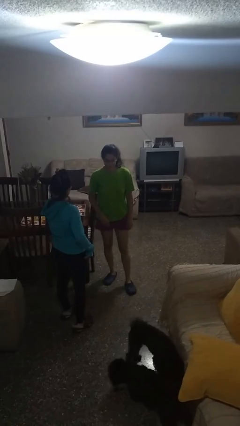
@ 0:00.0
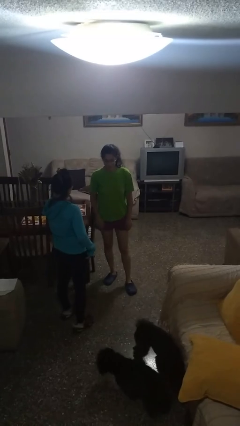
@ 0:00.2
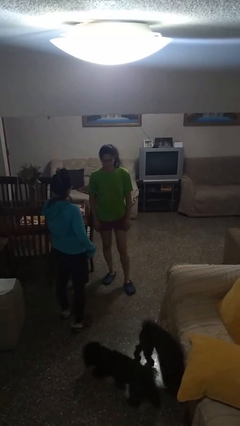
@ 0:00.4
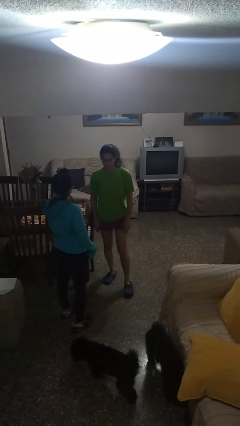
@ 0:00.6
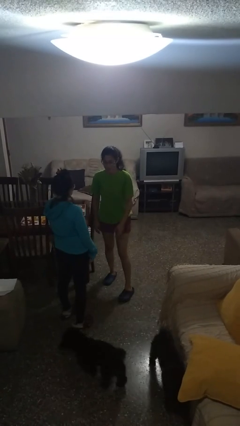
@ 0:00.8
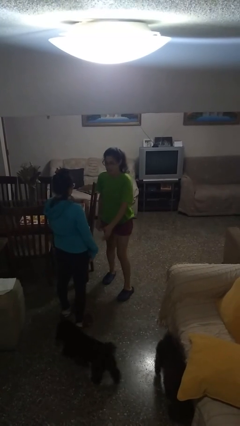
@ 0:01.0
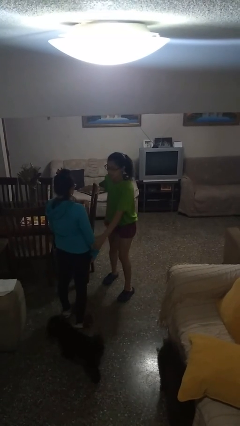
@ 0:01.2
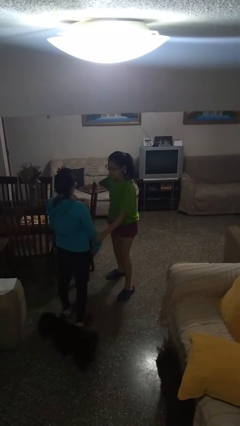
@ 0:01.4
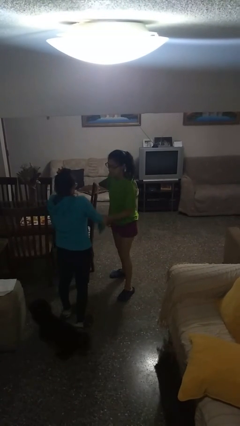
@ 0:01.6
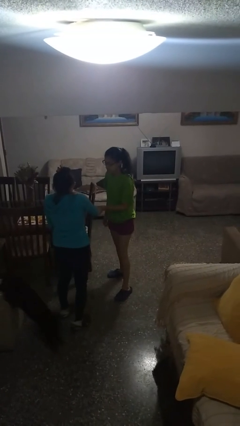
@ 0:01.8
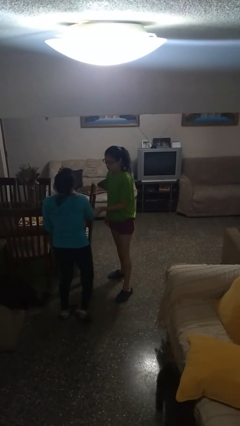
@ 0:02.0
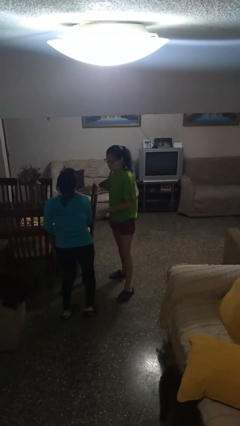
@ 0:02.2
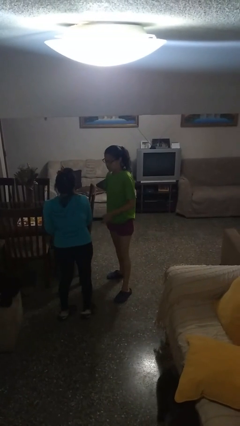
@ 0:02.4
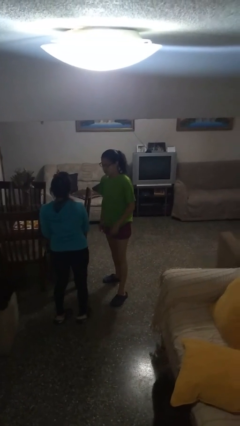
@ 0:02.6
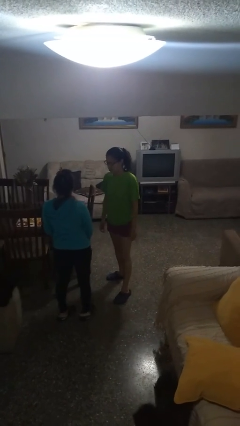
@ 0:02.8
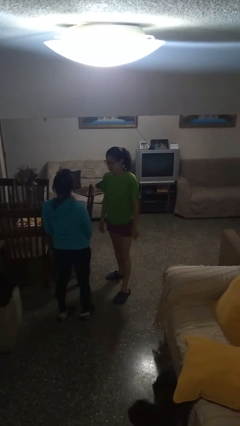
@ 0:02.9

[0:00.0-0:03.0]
person grabs person by forearm

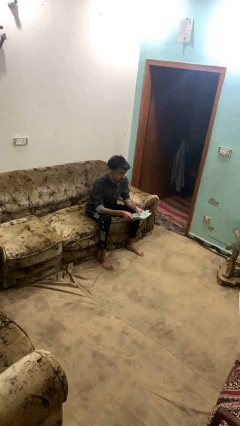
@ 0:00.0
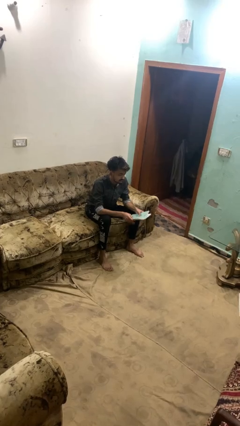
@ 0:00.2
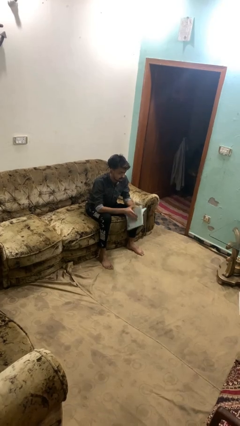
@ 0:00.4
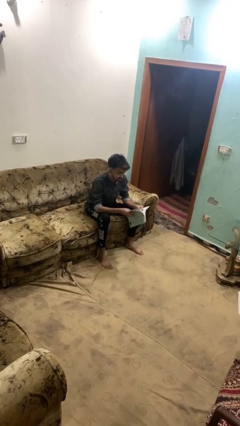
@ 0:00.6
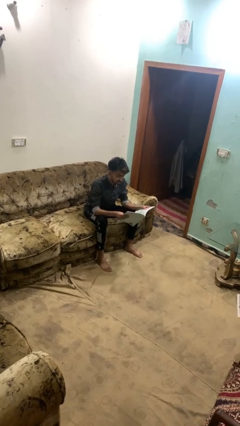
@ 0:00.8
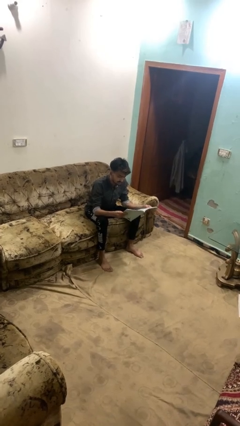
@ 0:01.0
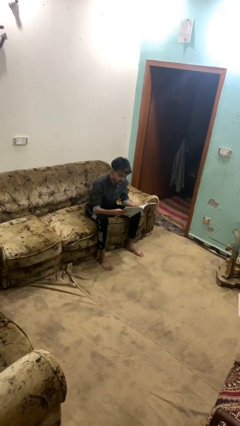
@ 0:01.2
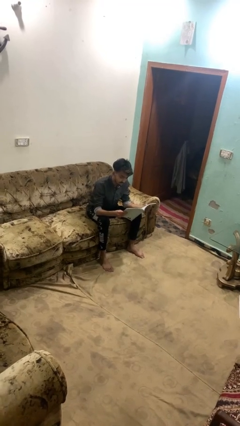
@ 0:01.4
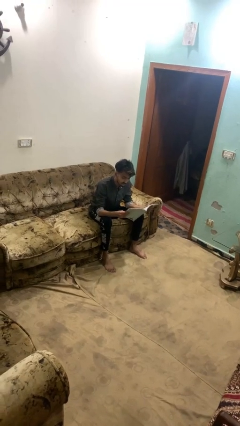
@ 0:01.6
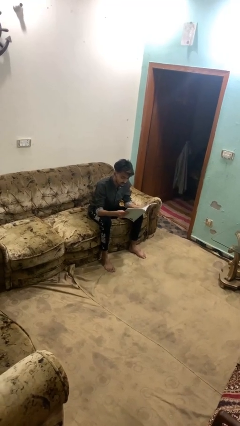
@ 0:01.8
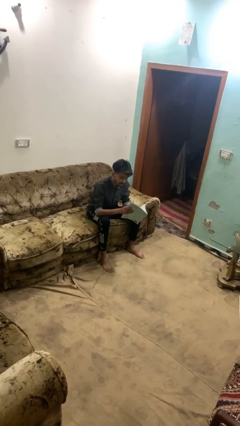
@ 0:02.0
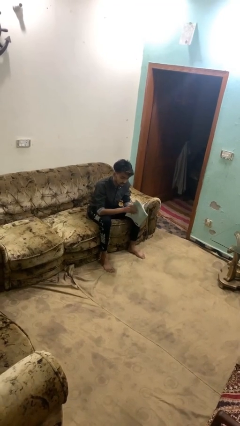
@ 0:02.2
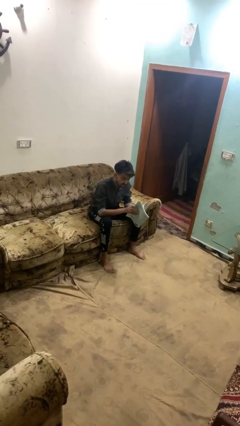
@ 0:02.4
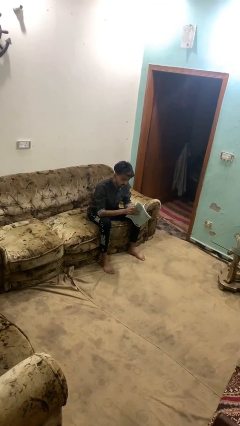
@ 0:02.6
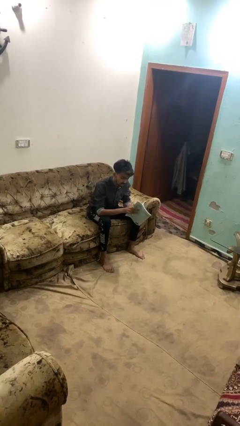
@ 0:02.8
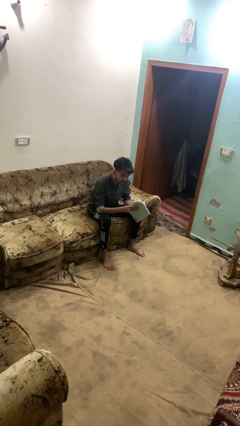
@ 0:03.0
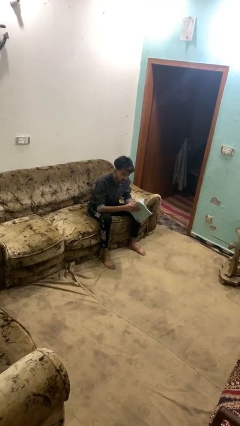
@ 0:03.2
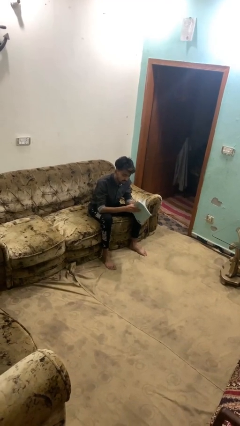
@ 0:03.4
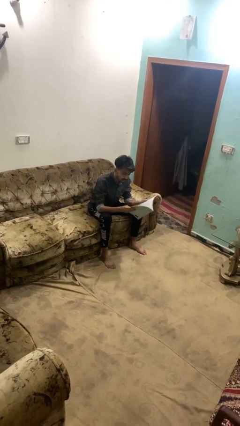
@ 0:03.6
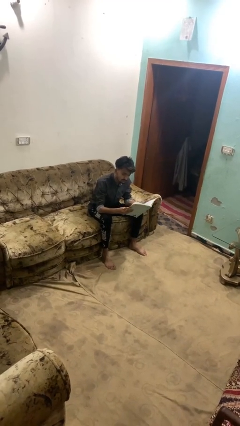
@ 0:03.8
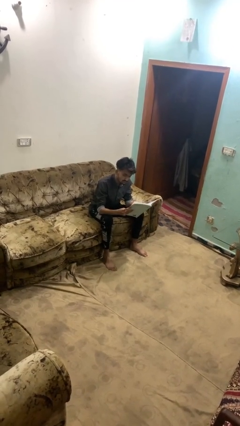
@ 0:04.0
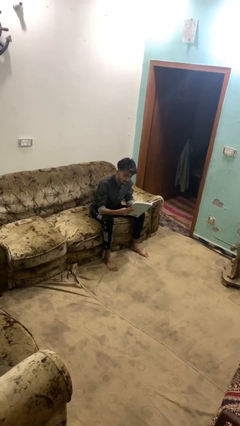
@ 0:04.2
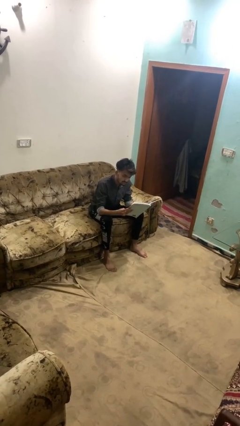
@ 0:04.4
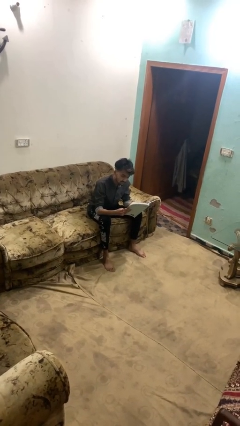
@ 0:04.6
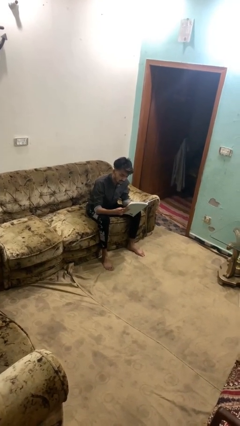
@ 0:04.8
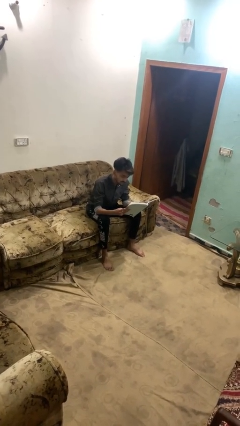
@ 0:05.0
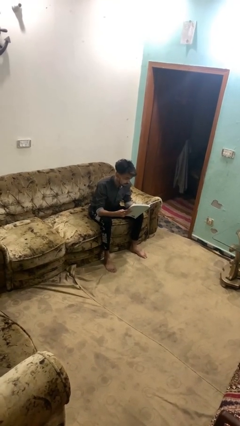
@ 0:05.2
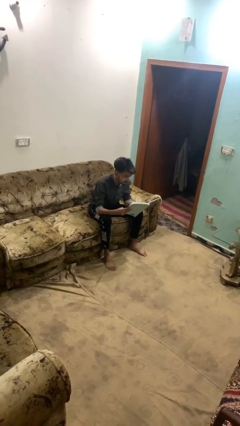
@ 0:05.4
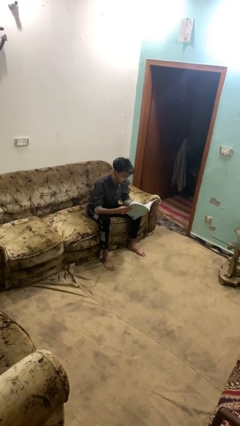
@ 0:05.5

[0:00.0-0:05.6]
person reads magazine

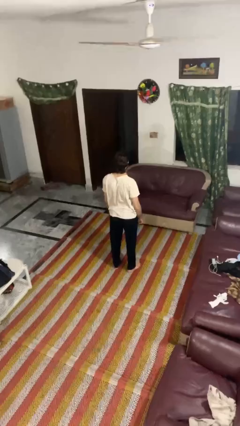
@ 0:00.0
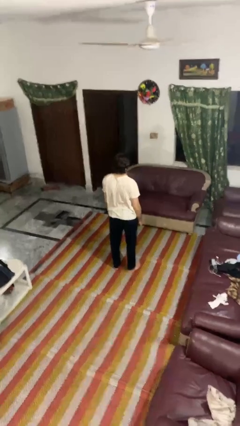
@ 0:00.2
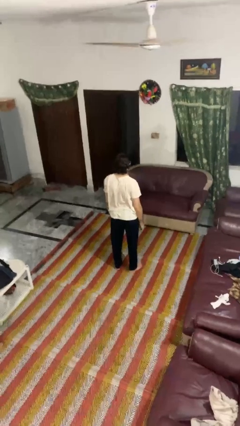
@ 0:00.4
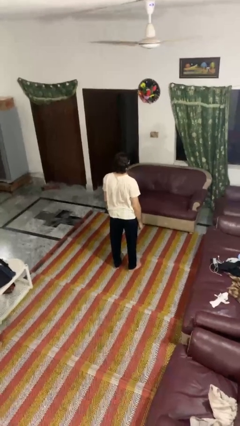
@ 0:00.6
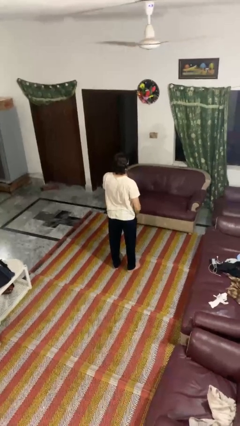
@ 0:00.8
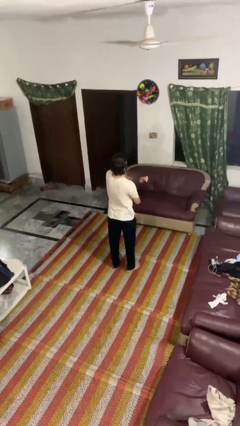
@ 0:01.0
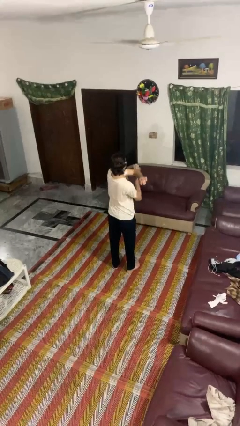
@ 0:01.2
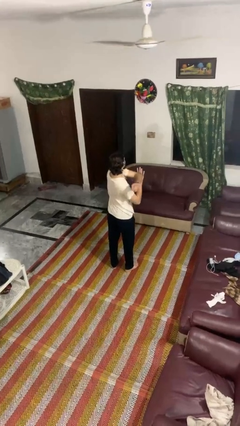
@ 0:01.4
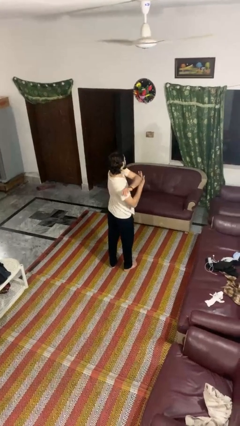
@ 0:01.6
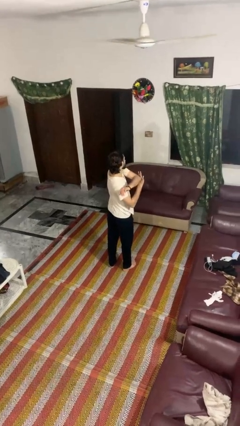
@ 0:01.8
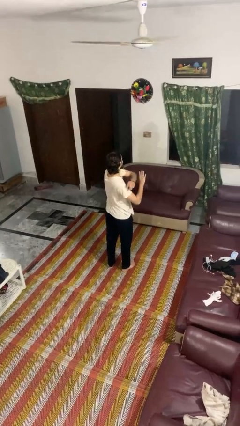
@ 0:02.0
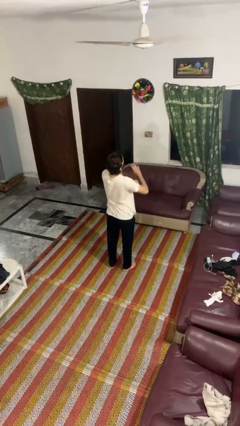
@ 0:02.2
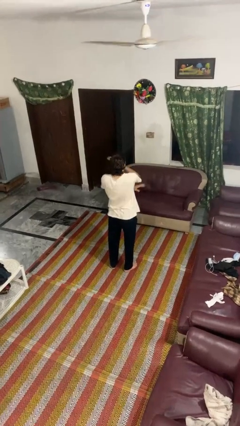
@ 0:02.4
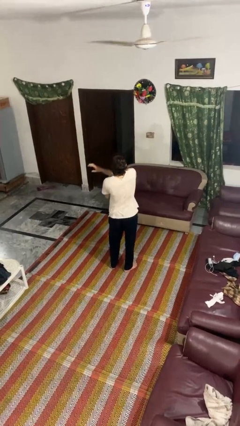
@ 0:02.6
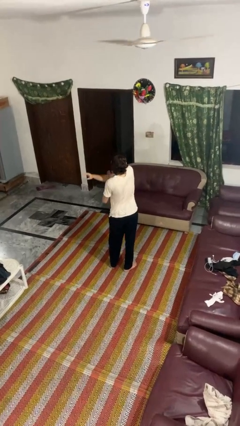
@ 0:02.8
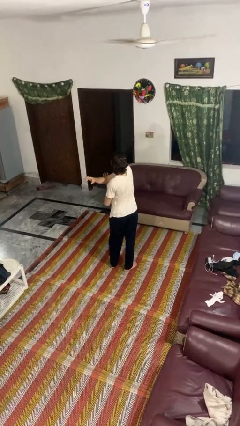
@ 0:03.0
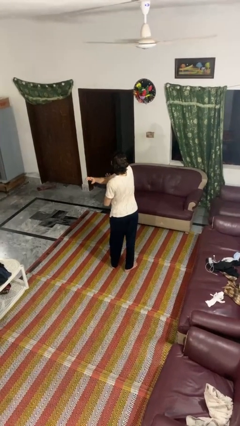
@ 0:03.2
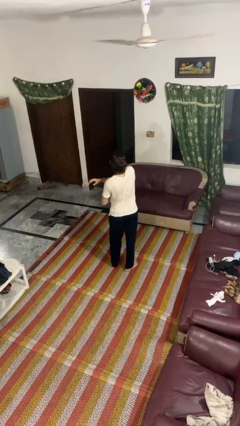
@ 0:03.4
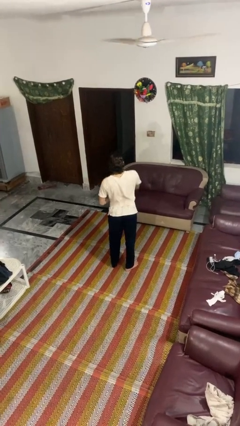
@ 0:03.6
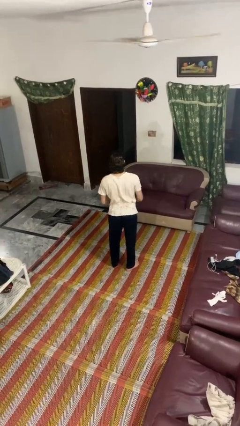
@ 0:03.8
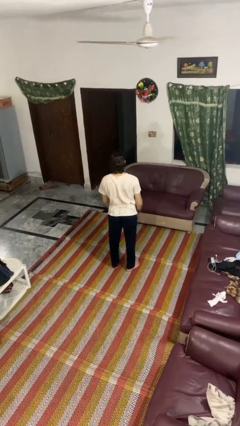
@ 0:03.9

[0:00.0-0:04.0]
person stretches arms to side

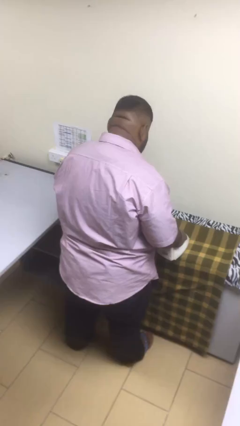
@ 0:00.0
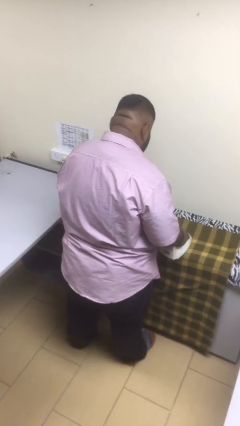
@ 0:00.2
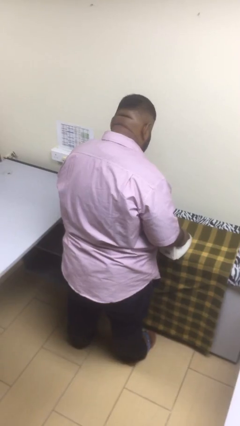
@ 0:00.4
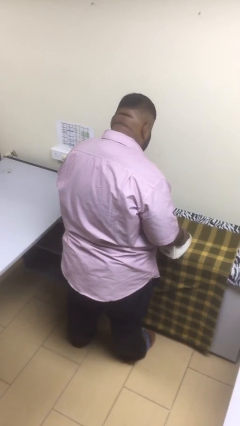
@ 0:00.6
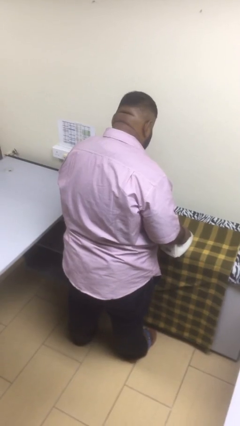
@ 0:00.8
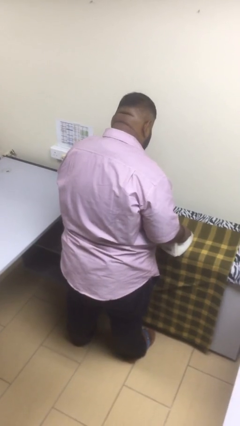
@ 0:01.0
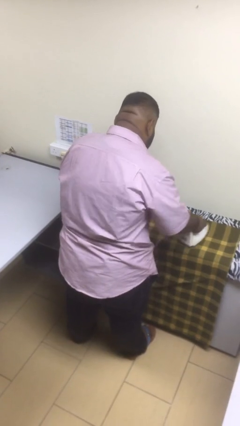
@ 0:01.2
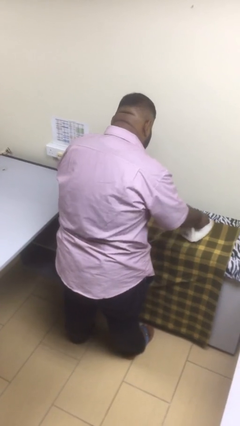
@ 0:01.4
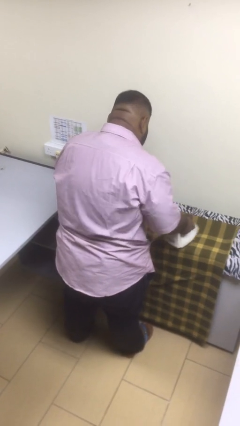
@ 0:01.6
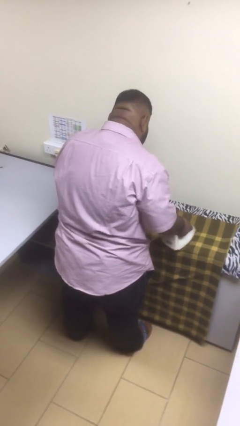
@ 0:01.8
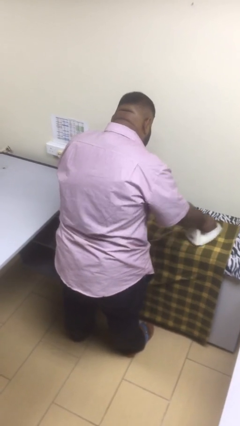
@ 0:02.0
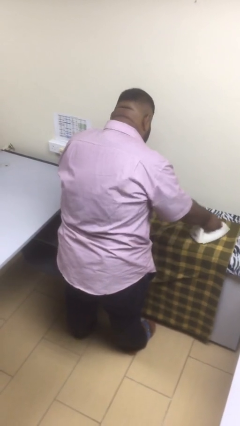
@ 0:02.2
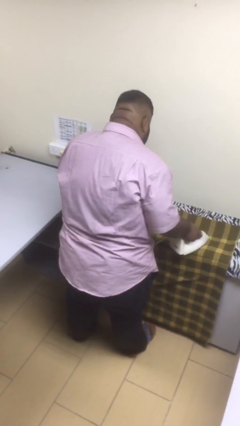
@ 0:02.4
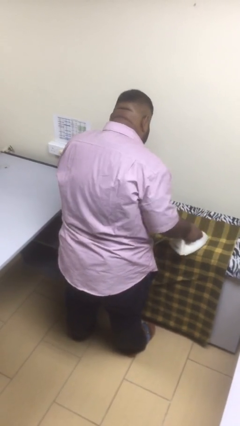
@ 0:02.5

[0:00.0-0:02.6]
person irons clothes

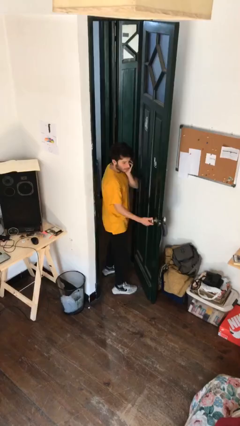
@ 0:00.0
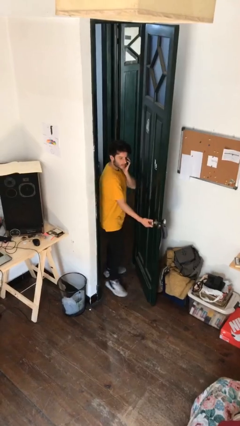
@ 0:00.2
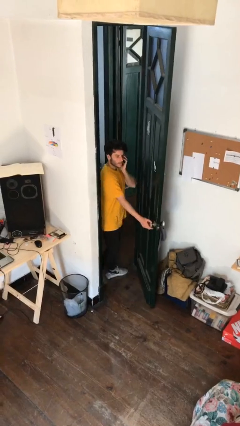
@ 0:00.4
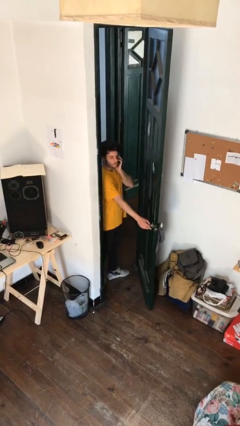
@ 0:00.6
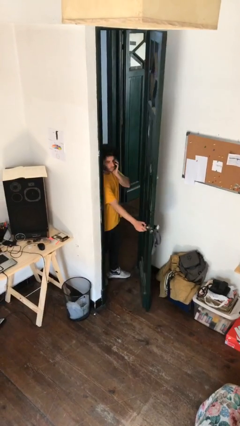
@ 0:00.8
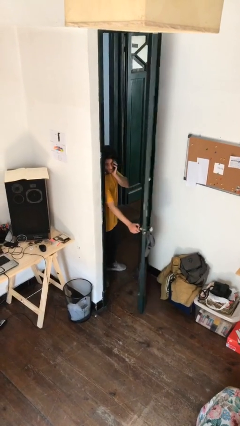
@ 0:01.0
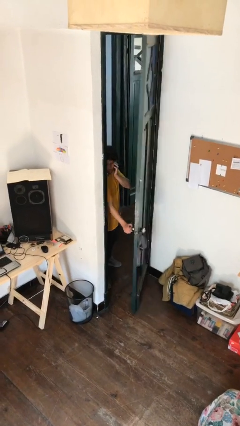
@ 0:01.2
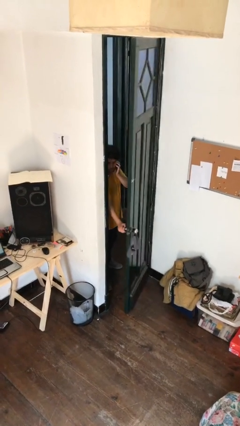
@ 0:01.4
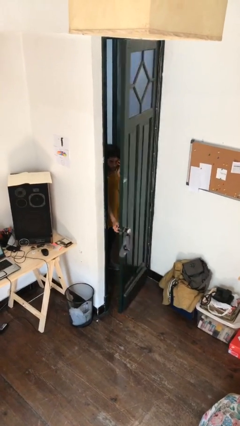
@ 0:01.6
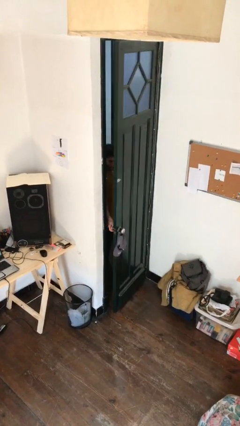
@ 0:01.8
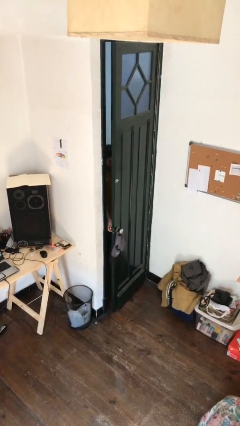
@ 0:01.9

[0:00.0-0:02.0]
person closes facility door

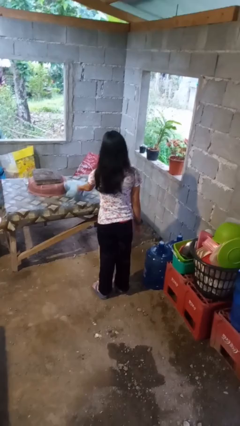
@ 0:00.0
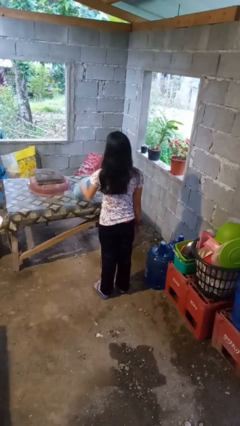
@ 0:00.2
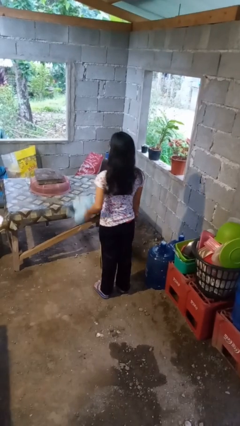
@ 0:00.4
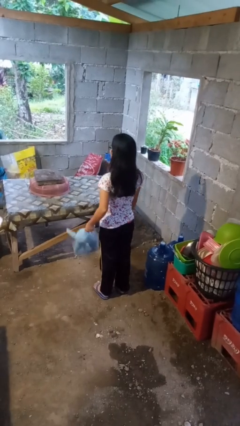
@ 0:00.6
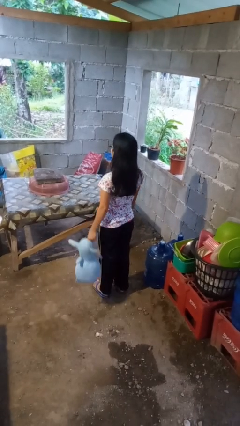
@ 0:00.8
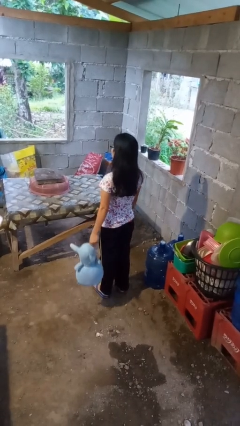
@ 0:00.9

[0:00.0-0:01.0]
person picks up object from table
